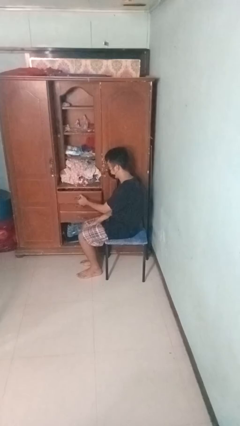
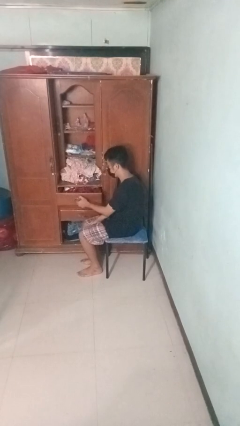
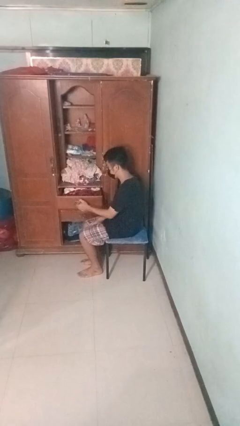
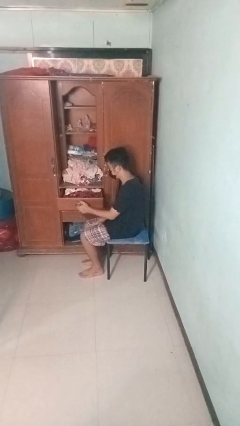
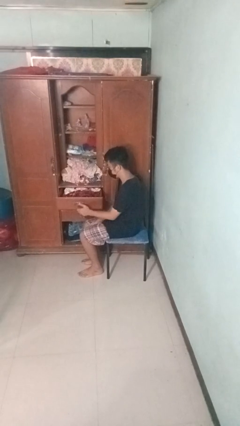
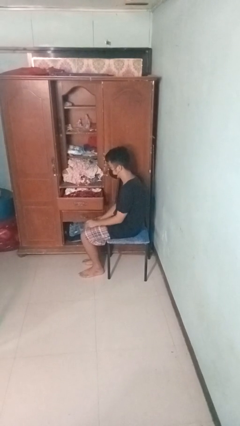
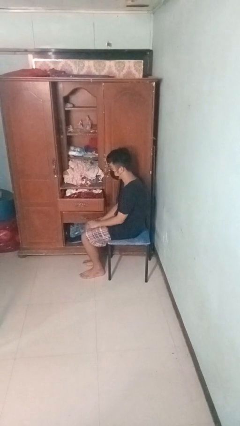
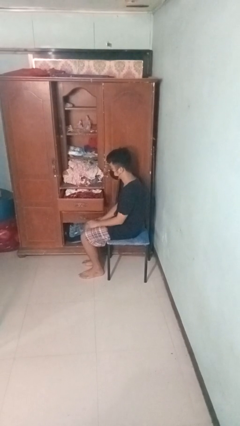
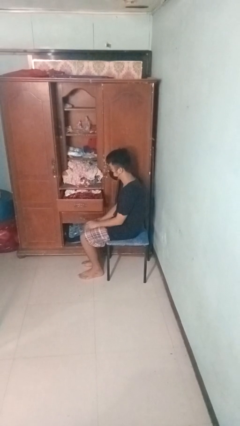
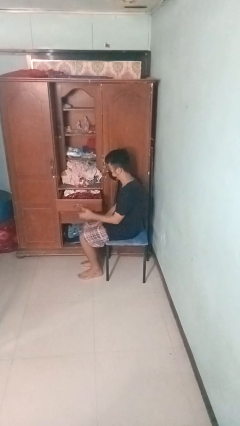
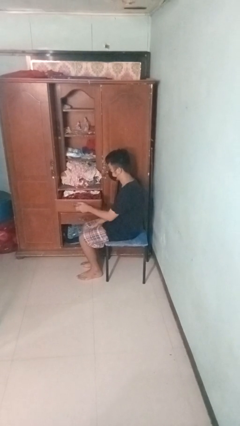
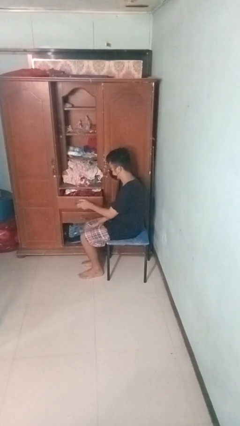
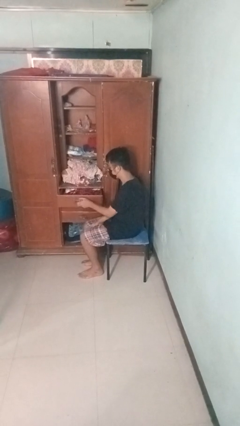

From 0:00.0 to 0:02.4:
person opens dresser drawer

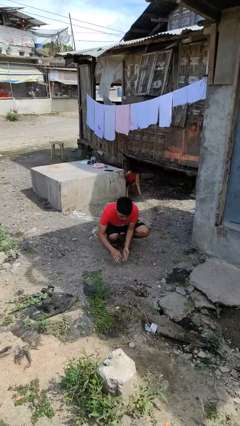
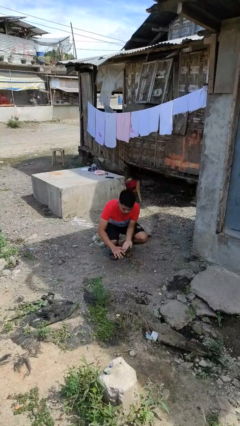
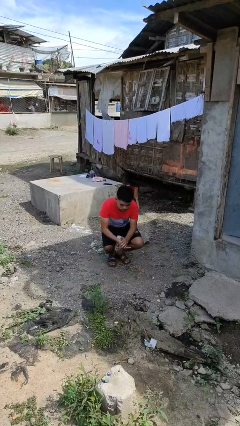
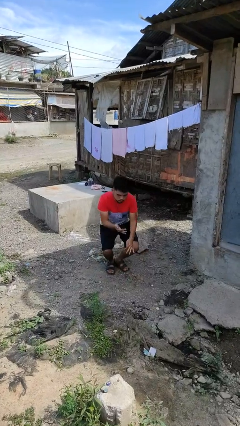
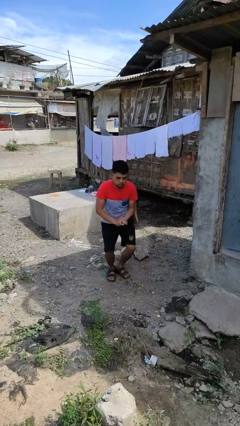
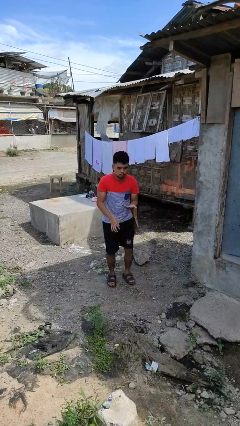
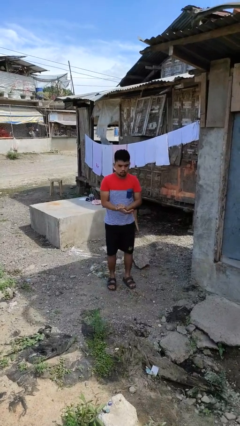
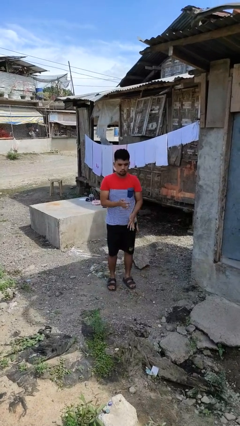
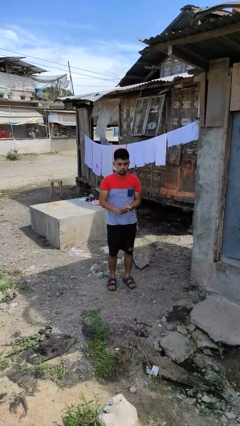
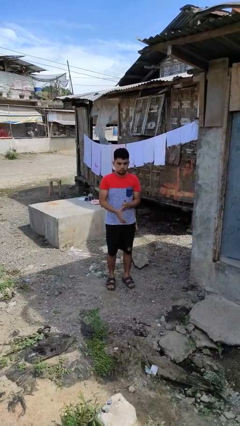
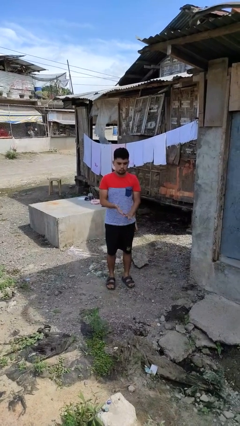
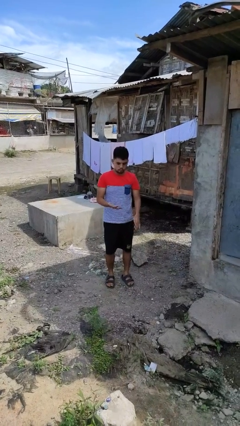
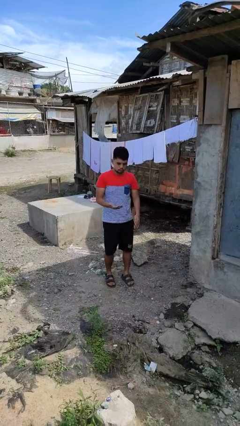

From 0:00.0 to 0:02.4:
person stands up from floor

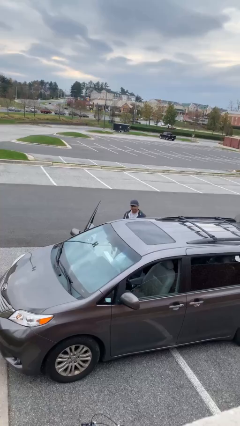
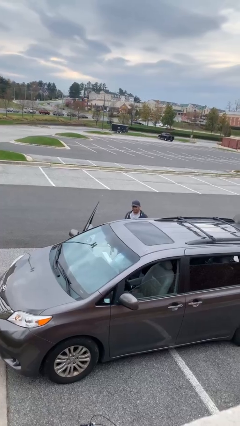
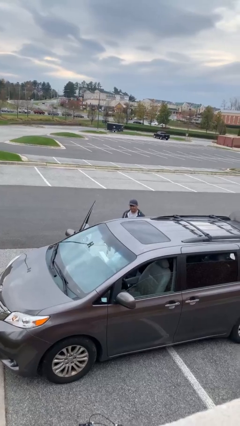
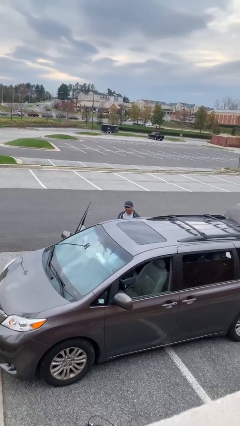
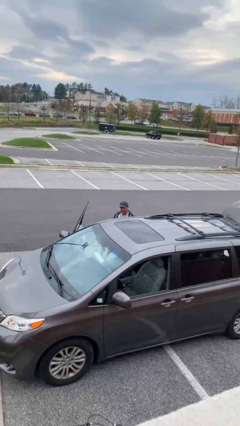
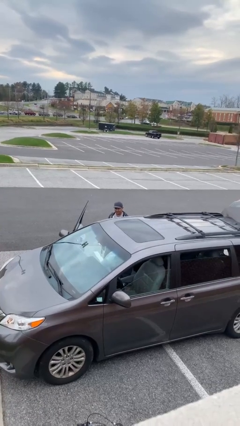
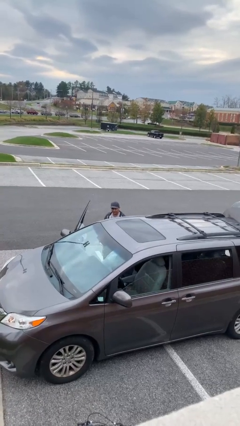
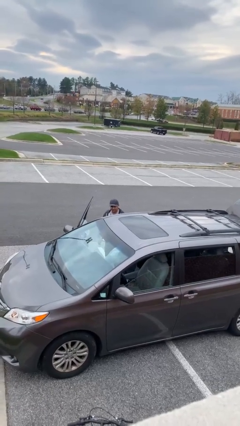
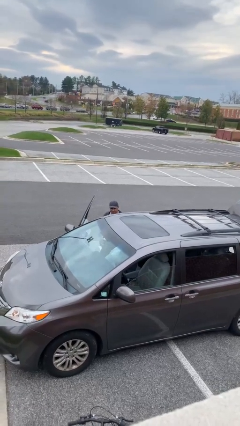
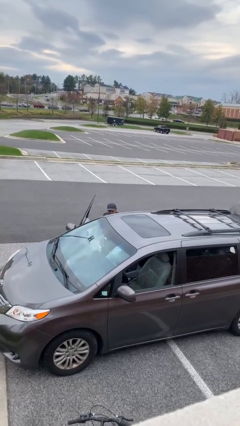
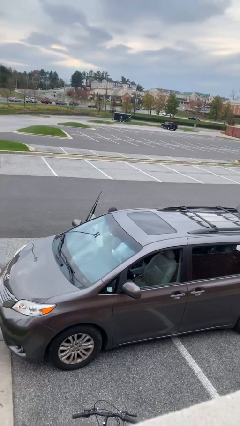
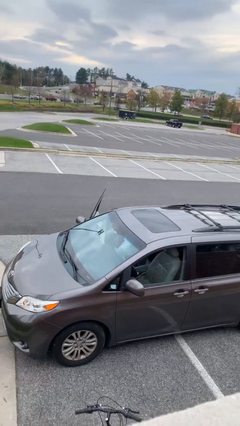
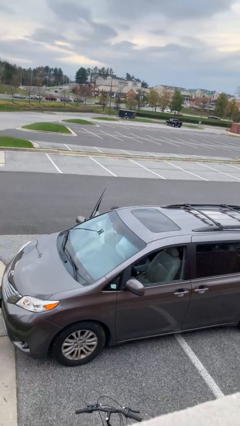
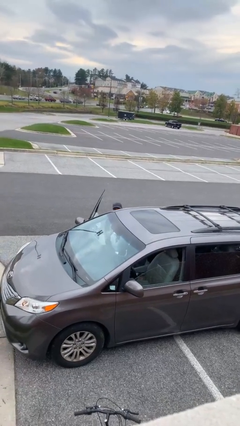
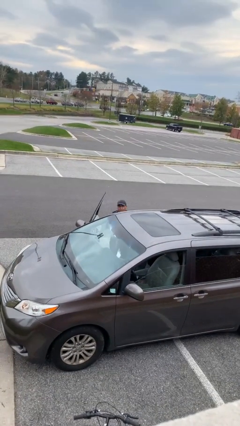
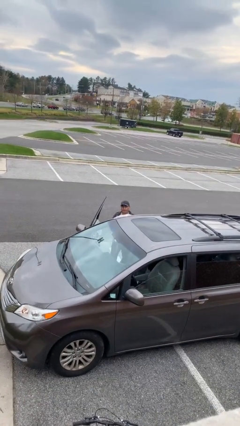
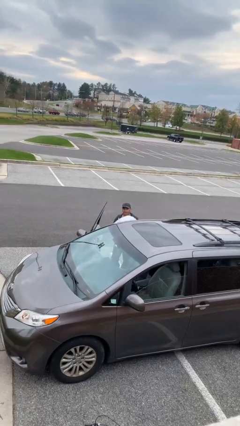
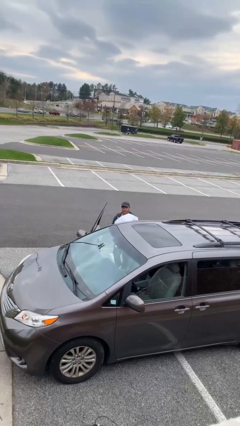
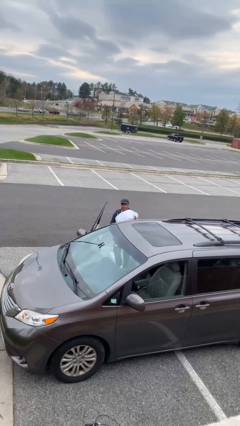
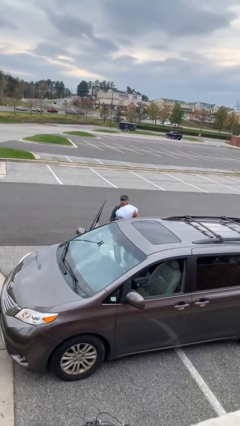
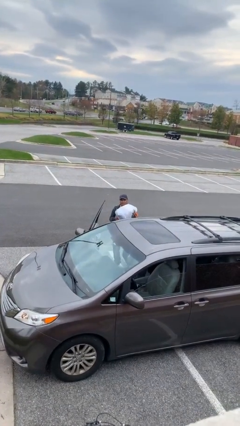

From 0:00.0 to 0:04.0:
person unloads car

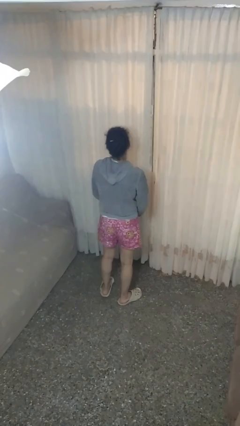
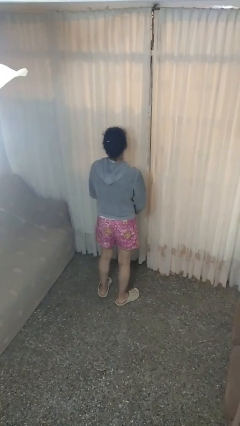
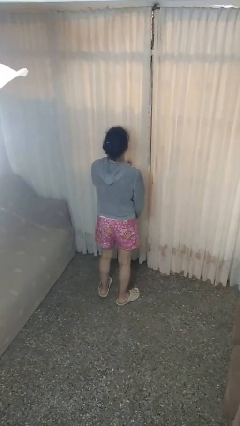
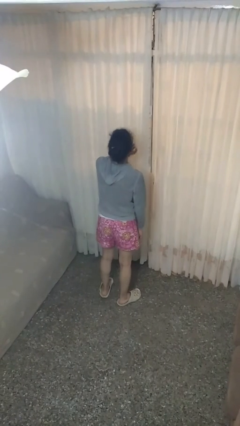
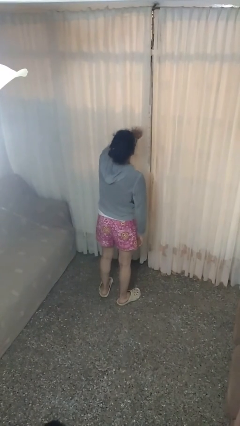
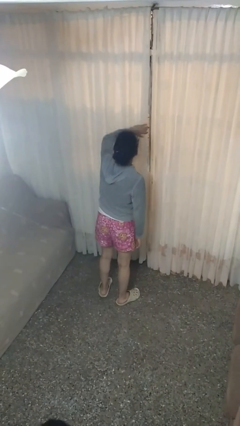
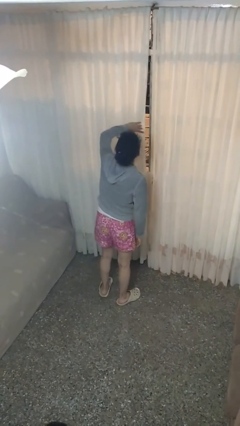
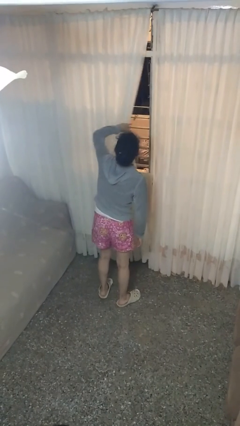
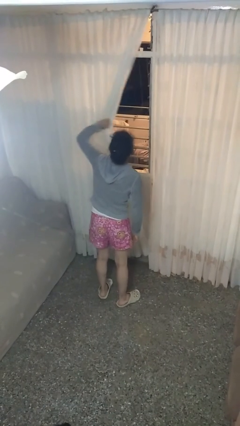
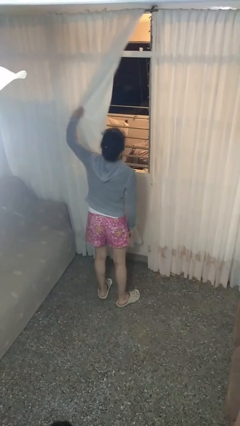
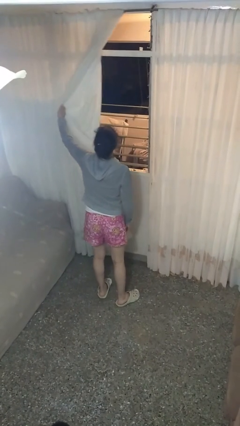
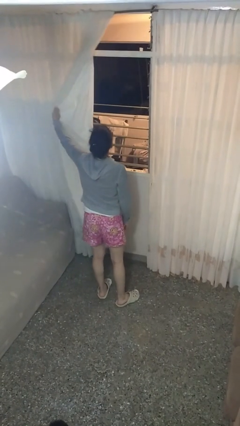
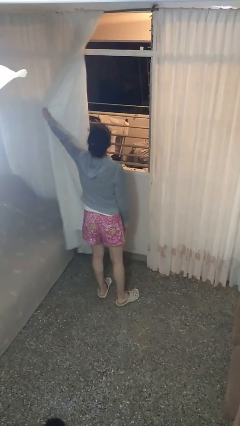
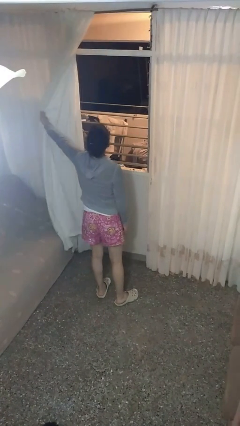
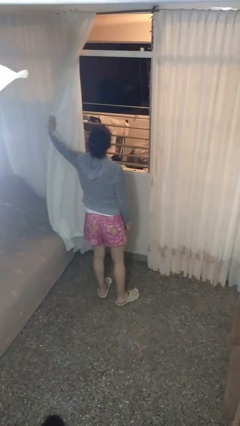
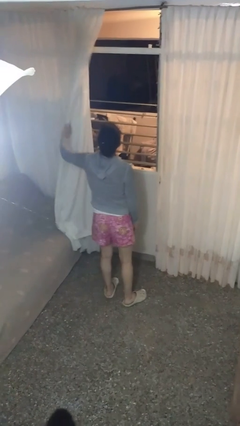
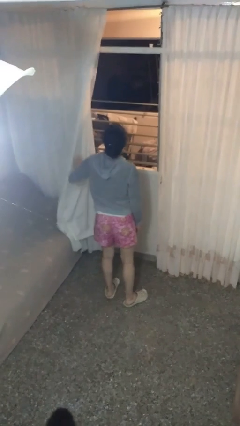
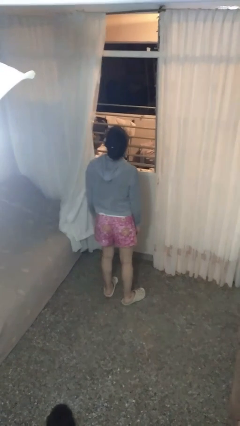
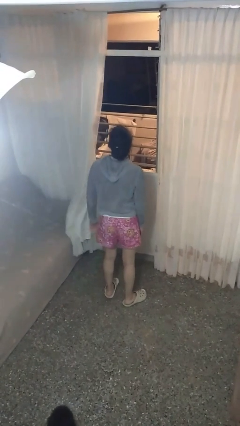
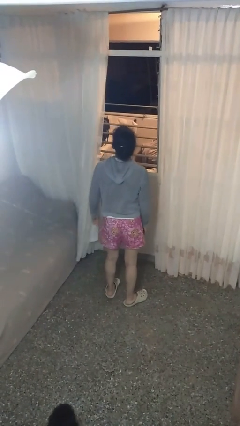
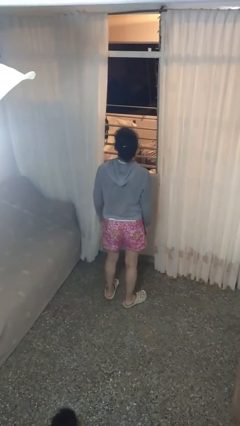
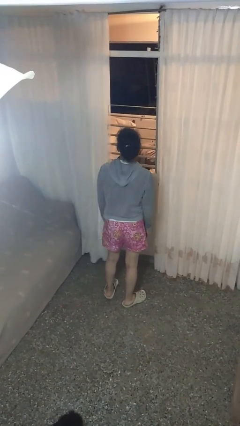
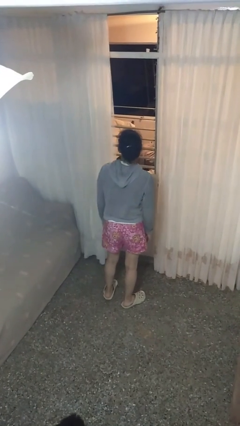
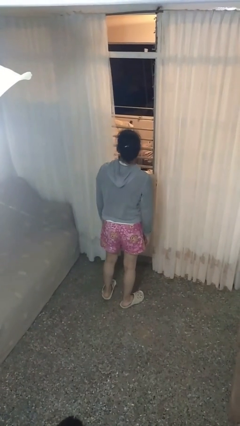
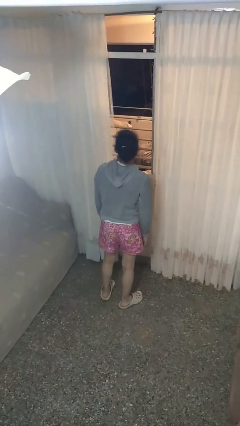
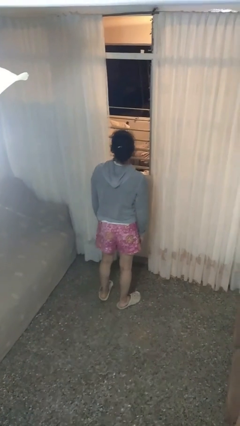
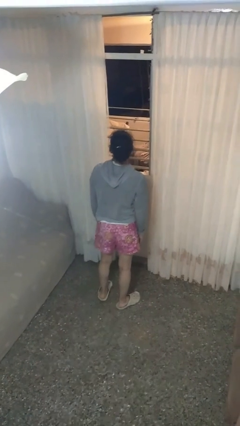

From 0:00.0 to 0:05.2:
person opens curtains

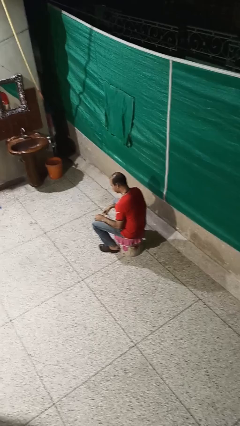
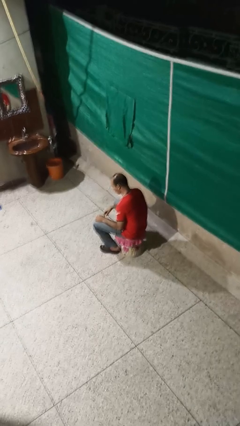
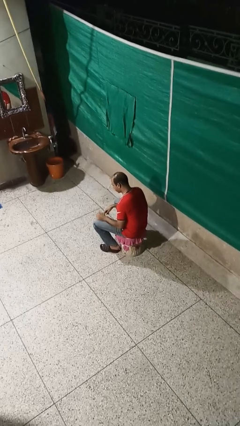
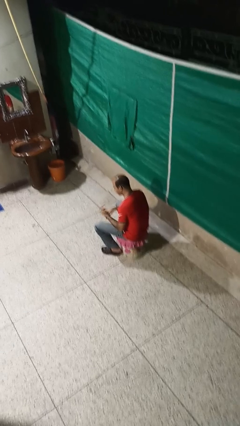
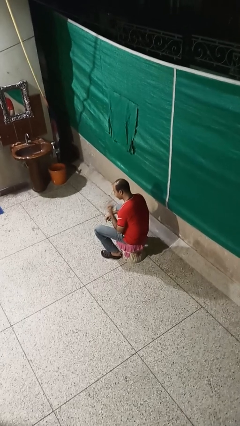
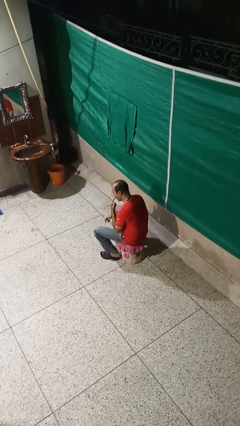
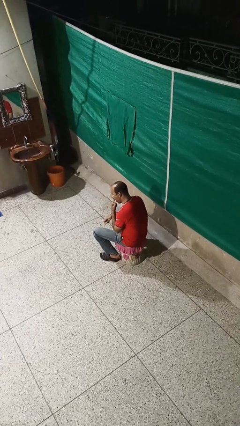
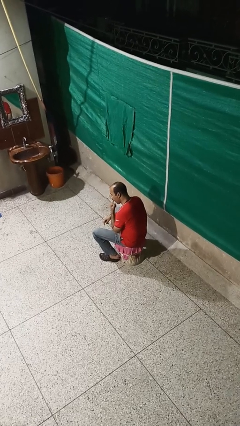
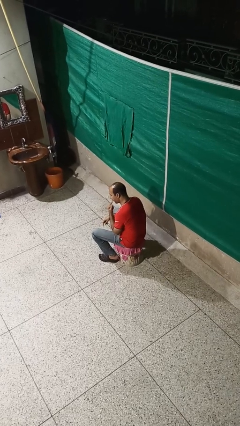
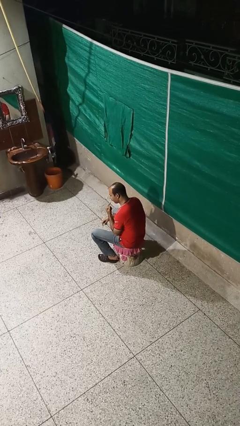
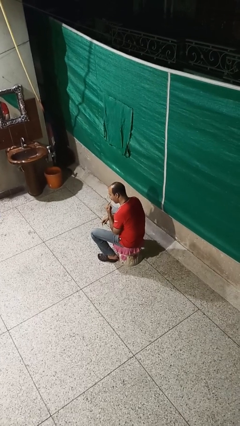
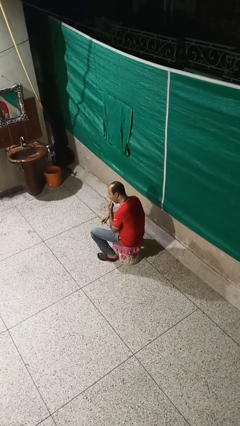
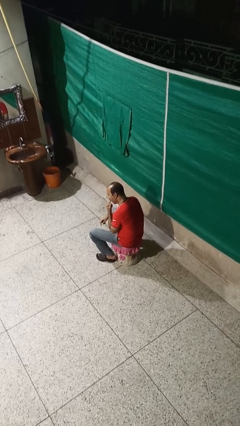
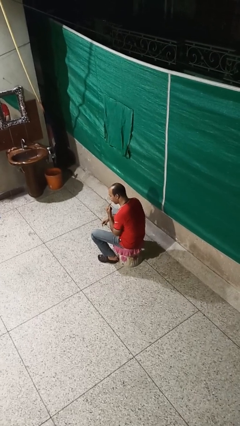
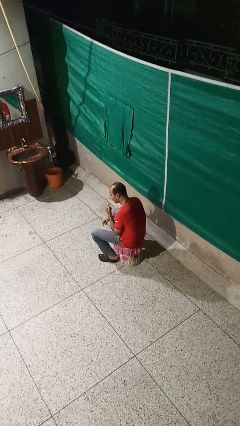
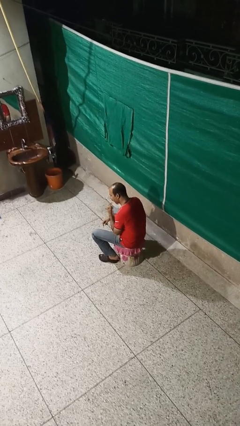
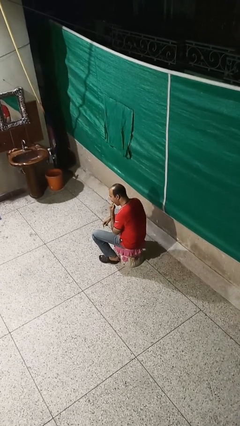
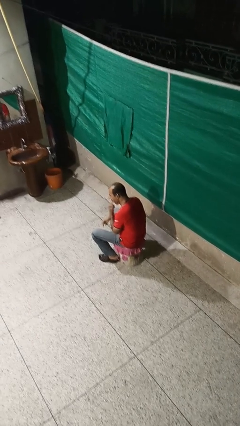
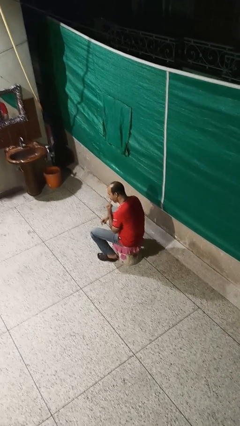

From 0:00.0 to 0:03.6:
person licks fingers
